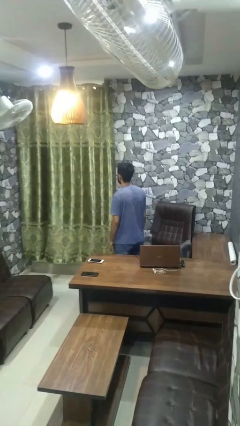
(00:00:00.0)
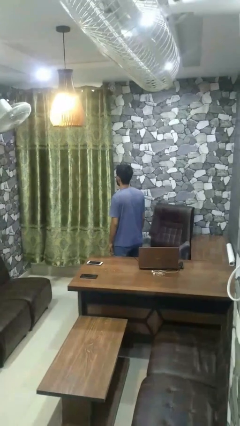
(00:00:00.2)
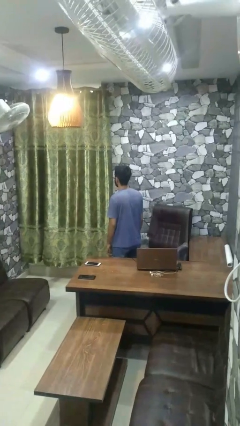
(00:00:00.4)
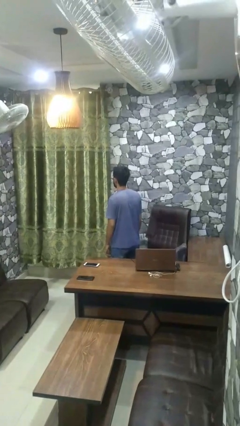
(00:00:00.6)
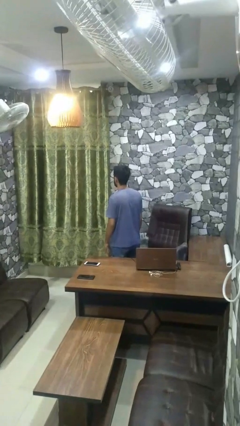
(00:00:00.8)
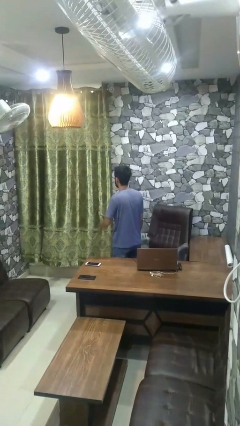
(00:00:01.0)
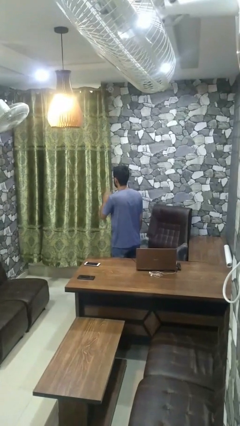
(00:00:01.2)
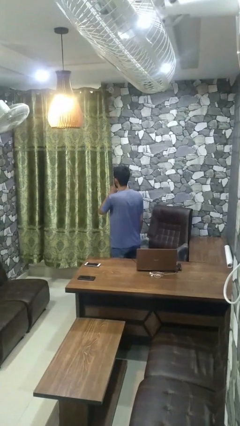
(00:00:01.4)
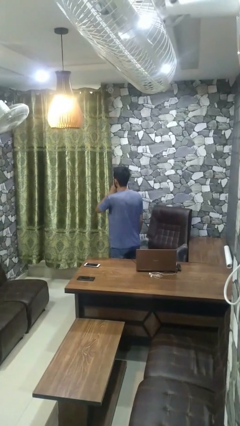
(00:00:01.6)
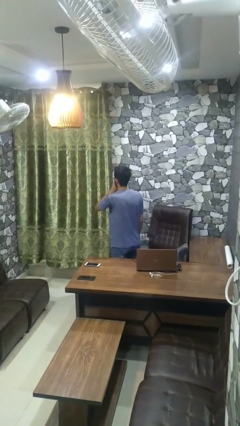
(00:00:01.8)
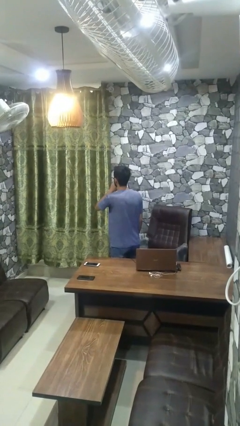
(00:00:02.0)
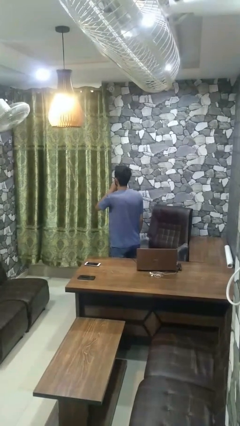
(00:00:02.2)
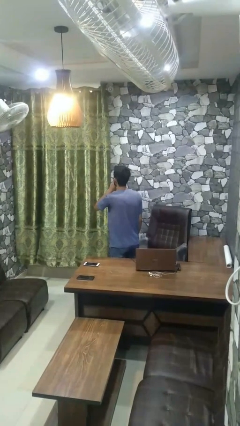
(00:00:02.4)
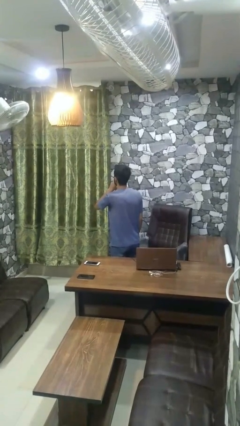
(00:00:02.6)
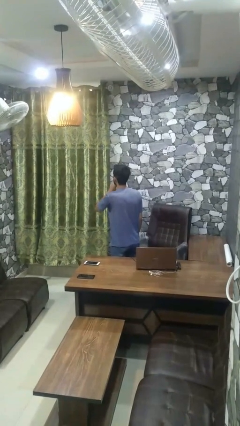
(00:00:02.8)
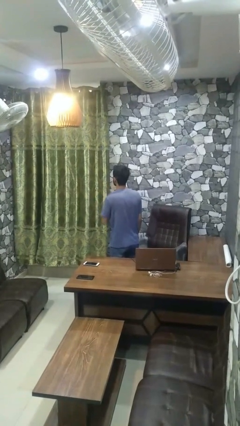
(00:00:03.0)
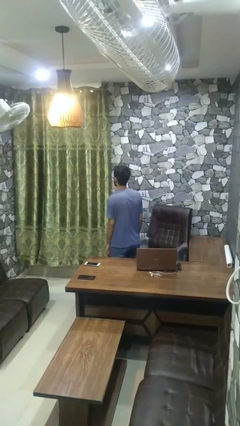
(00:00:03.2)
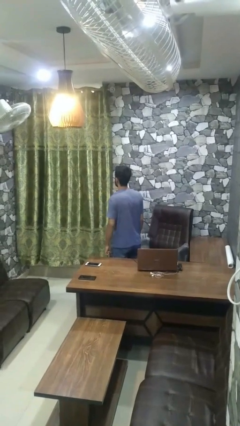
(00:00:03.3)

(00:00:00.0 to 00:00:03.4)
person gestures be quiet

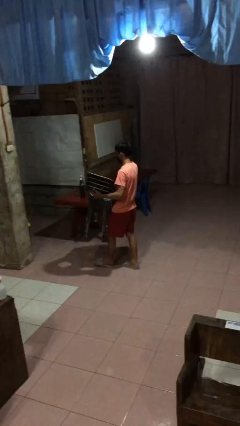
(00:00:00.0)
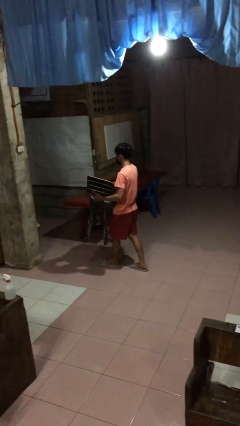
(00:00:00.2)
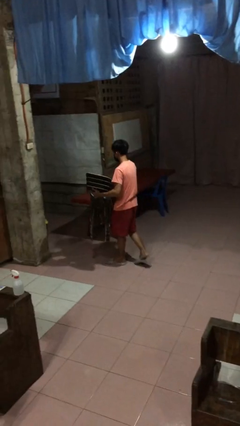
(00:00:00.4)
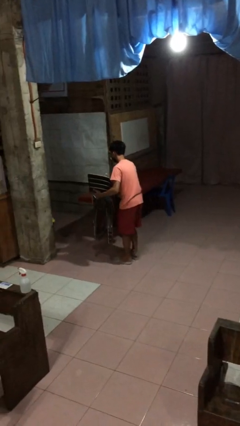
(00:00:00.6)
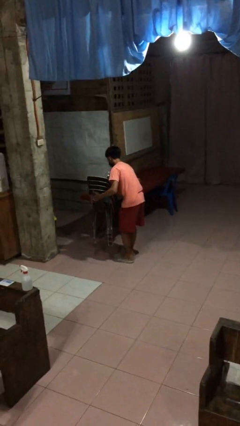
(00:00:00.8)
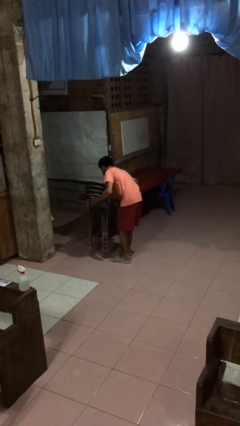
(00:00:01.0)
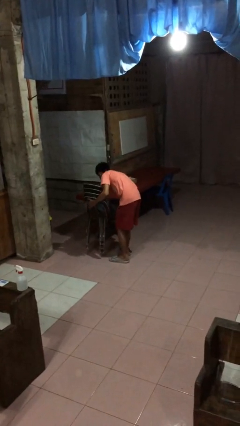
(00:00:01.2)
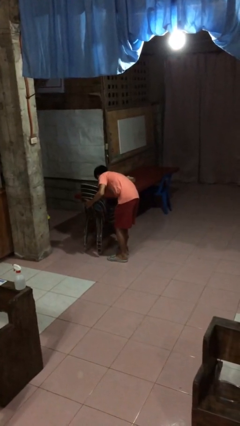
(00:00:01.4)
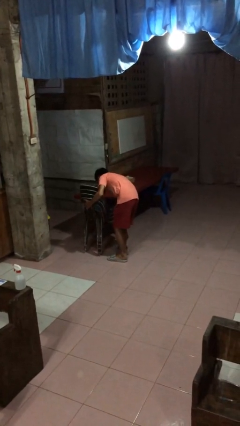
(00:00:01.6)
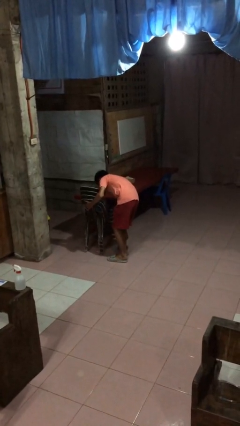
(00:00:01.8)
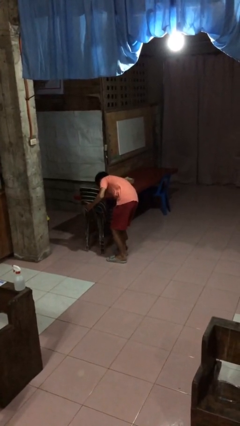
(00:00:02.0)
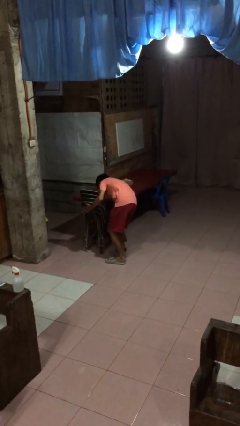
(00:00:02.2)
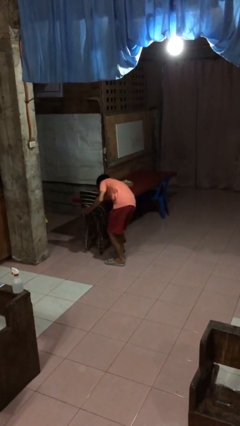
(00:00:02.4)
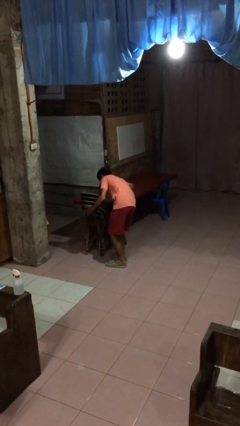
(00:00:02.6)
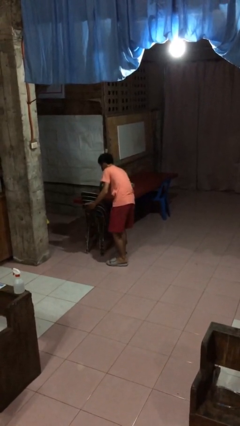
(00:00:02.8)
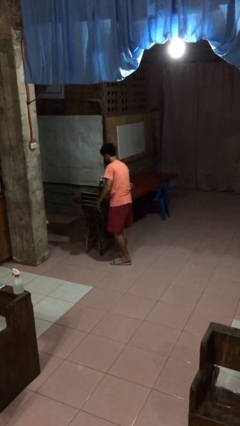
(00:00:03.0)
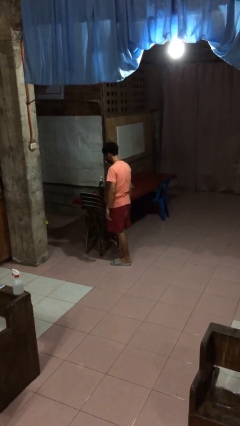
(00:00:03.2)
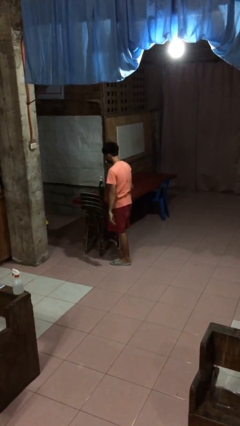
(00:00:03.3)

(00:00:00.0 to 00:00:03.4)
person puts down object on floor

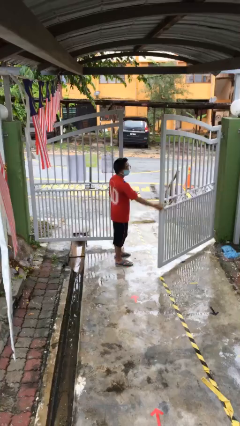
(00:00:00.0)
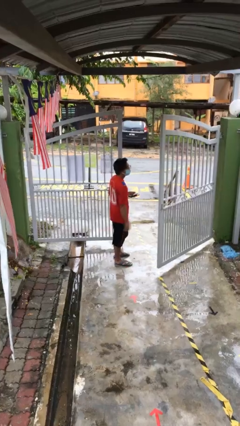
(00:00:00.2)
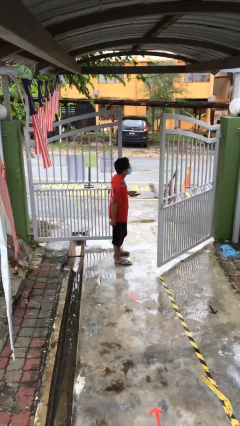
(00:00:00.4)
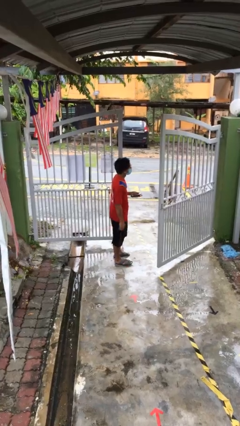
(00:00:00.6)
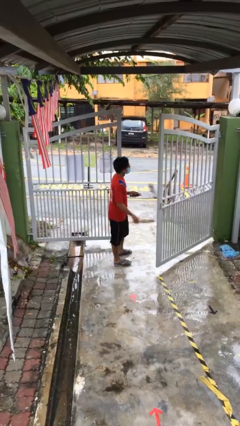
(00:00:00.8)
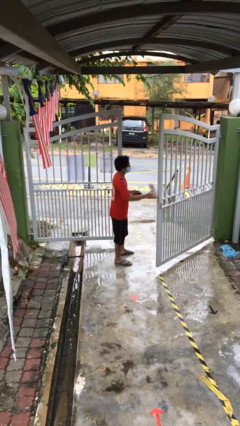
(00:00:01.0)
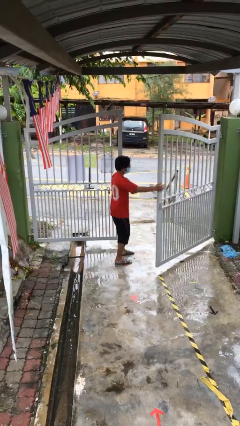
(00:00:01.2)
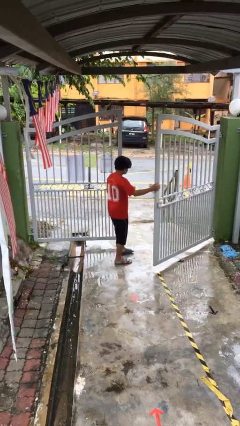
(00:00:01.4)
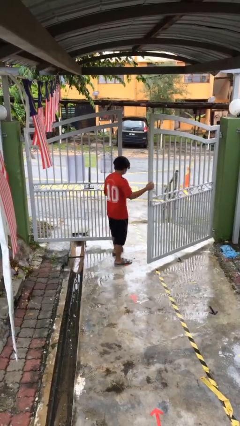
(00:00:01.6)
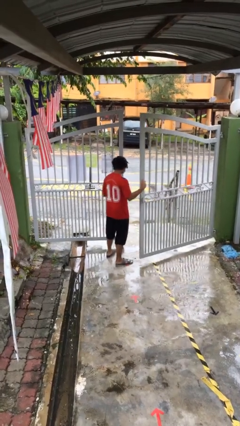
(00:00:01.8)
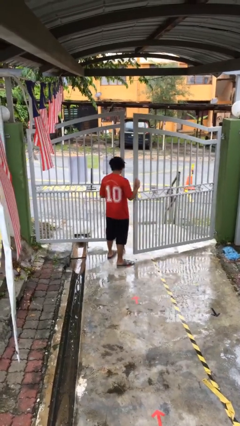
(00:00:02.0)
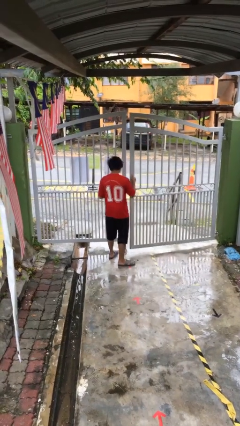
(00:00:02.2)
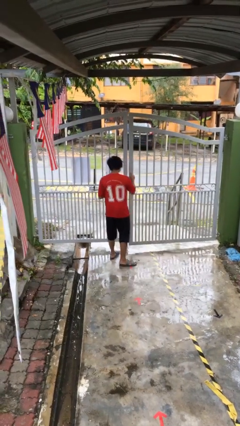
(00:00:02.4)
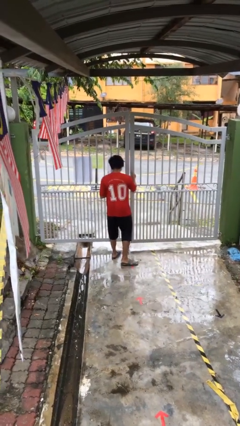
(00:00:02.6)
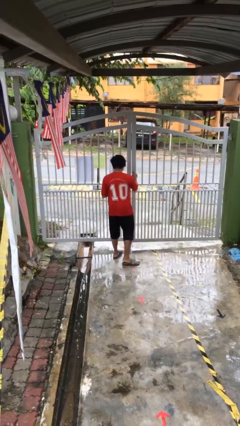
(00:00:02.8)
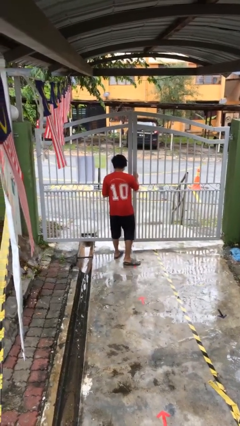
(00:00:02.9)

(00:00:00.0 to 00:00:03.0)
person closes facility door

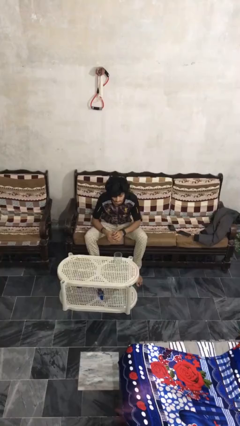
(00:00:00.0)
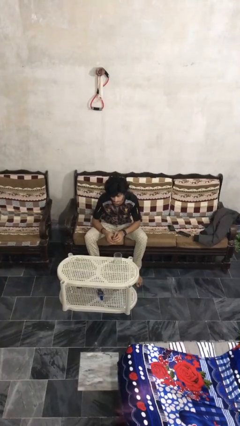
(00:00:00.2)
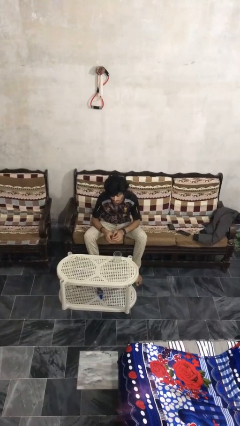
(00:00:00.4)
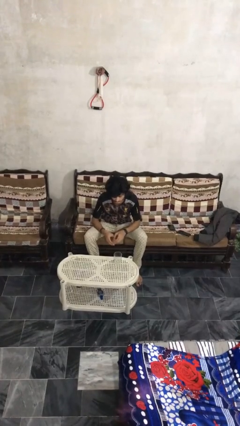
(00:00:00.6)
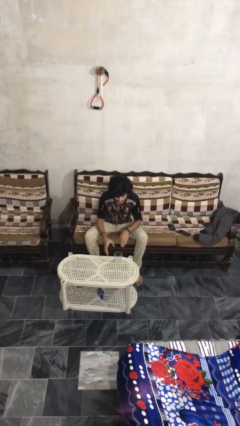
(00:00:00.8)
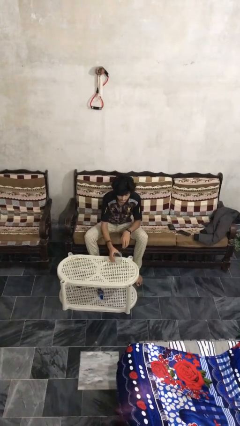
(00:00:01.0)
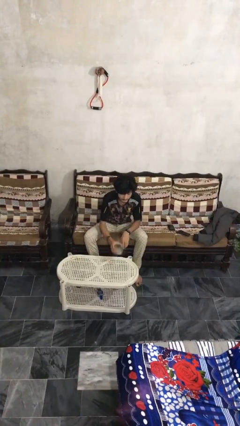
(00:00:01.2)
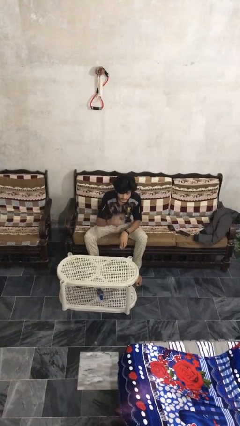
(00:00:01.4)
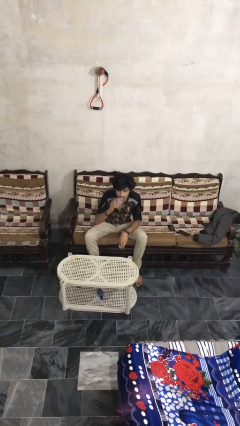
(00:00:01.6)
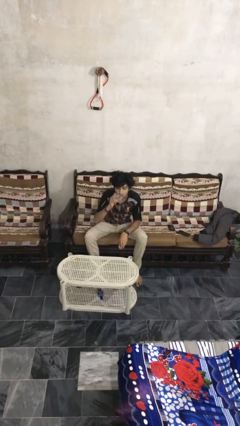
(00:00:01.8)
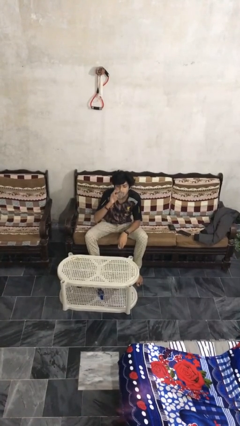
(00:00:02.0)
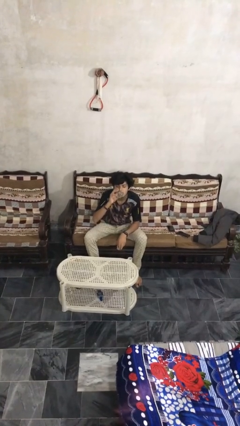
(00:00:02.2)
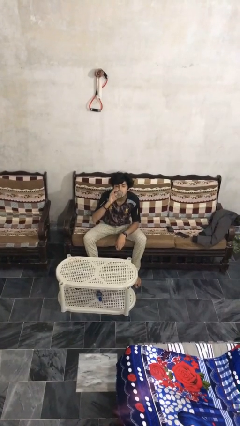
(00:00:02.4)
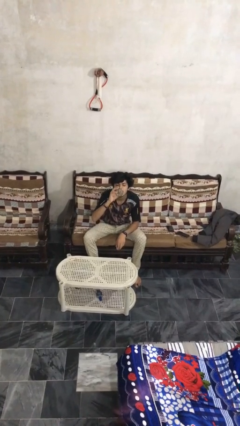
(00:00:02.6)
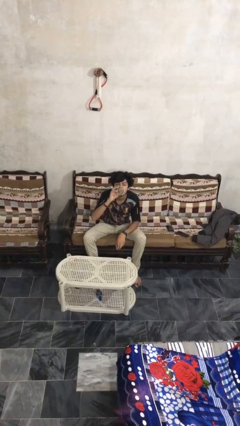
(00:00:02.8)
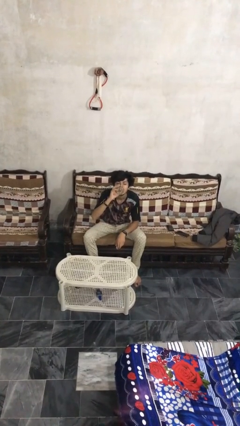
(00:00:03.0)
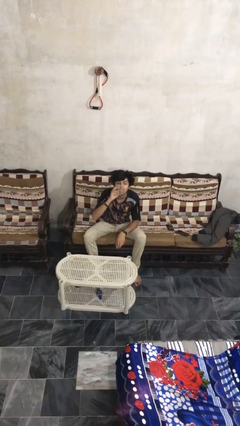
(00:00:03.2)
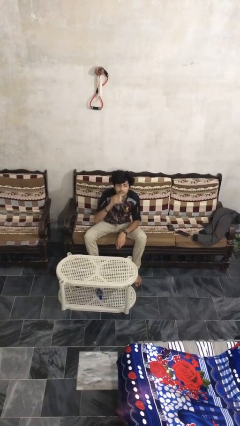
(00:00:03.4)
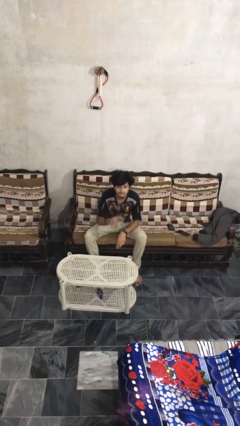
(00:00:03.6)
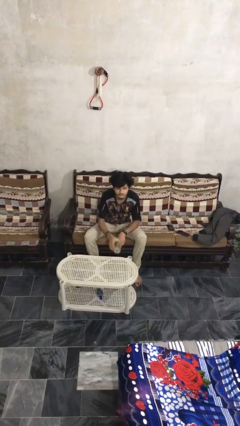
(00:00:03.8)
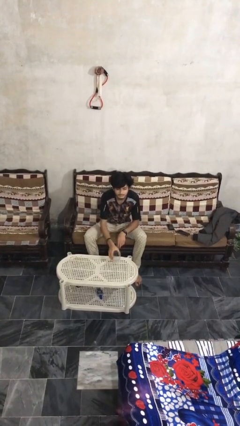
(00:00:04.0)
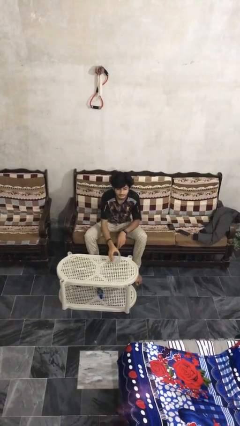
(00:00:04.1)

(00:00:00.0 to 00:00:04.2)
person drinks from cup

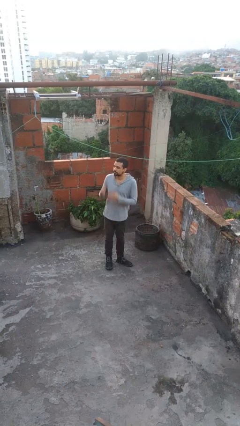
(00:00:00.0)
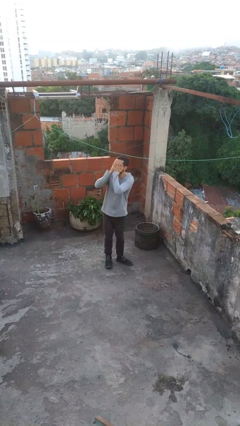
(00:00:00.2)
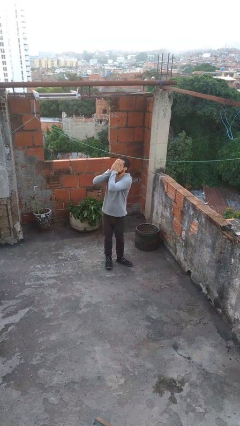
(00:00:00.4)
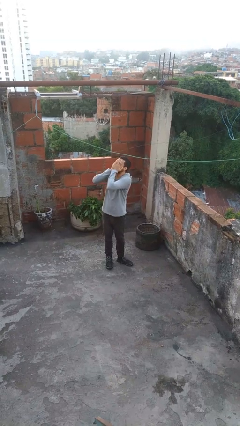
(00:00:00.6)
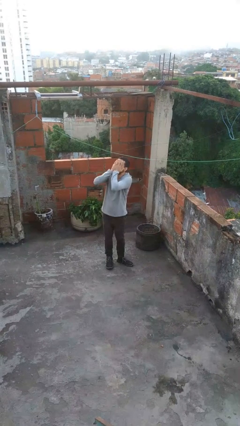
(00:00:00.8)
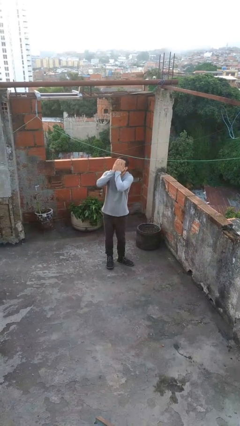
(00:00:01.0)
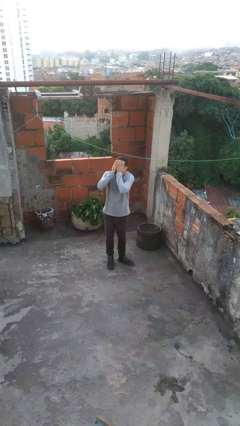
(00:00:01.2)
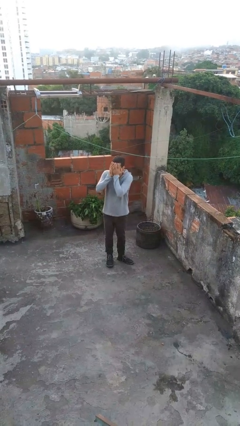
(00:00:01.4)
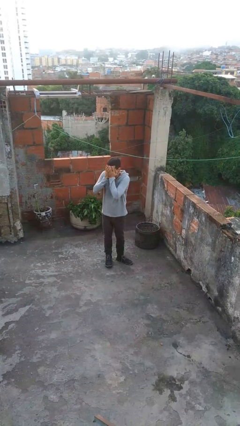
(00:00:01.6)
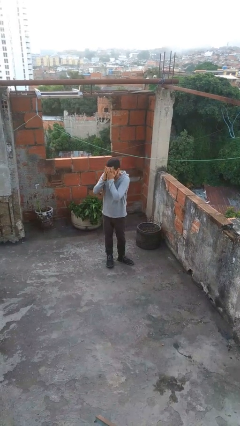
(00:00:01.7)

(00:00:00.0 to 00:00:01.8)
person covers face with hands

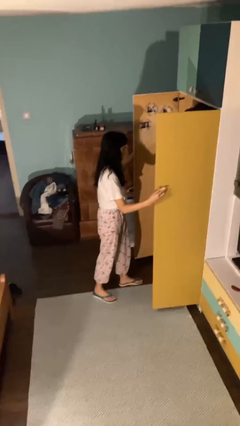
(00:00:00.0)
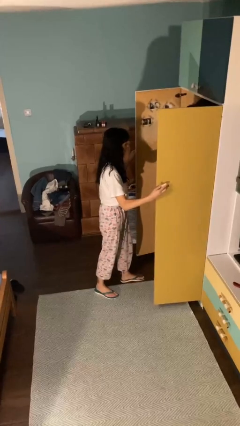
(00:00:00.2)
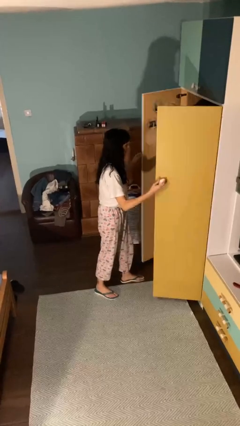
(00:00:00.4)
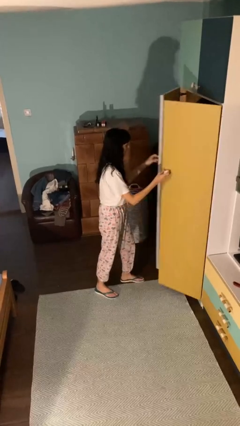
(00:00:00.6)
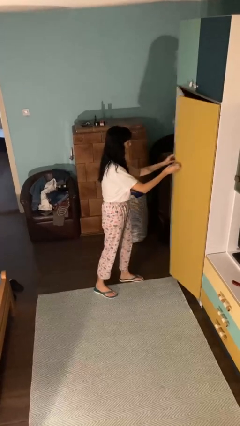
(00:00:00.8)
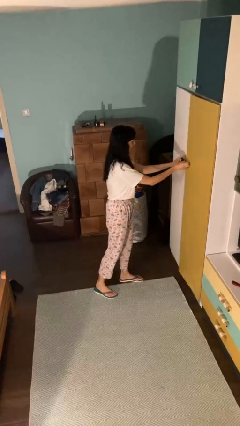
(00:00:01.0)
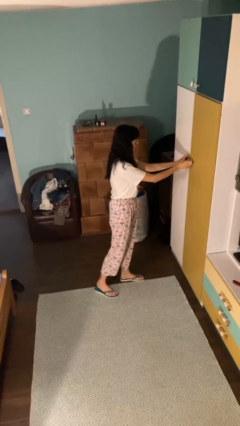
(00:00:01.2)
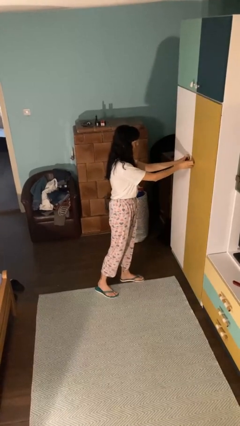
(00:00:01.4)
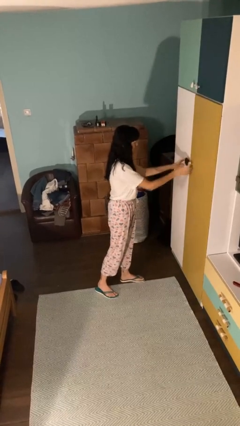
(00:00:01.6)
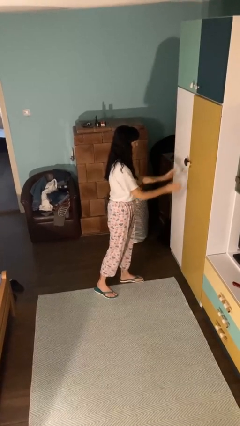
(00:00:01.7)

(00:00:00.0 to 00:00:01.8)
person closes closet door
